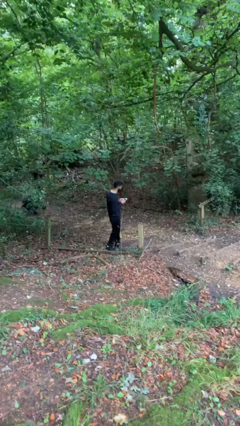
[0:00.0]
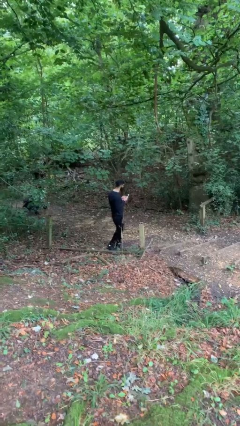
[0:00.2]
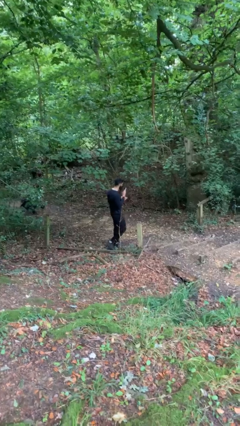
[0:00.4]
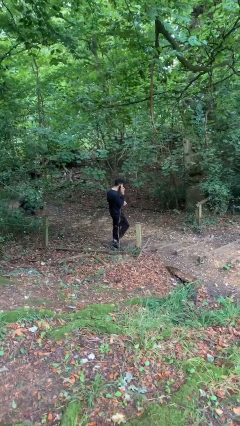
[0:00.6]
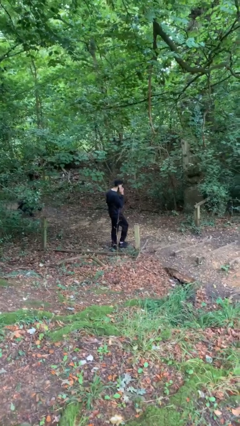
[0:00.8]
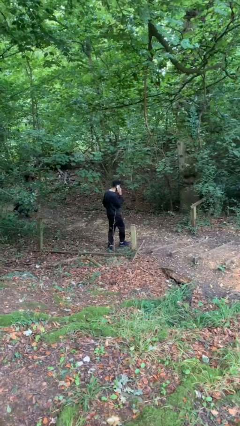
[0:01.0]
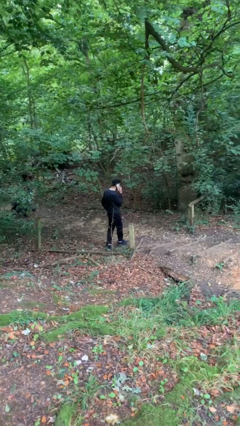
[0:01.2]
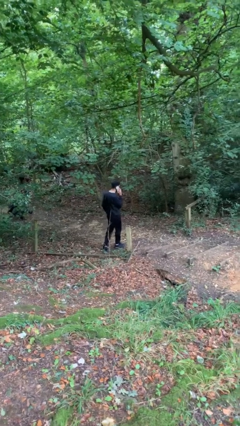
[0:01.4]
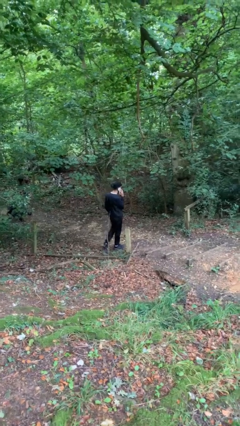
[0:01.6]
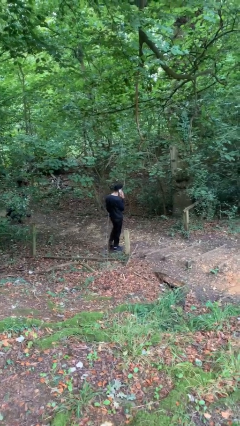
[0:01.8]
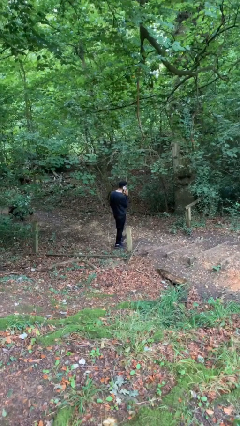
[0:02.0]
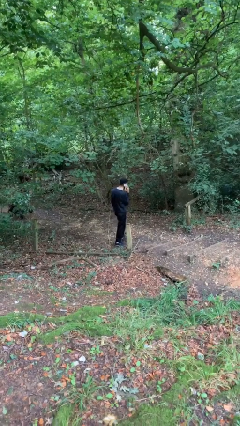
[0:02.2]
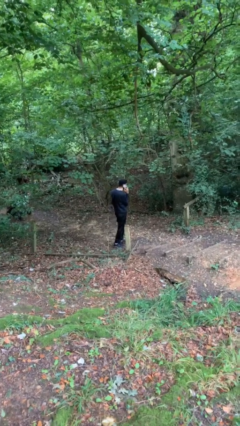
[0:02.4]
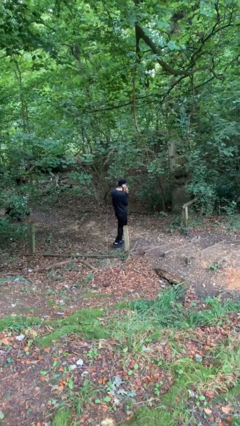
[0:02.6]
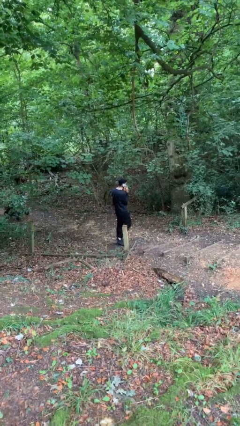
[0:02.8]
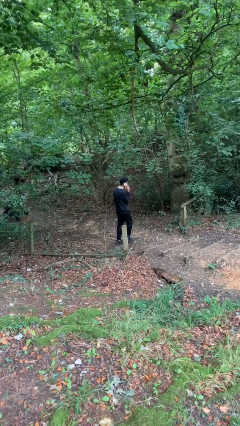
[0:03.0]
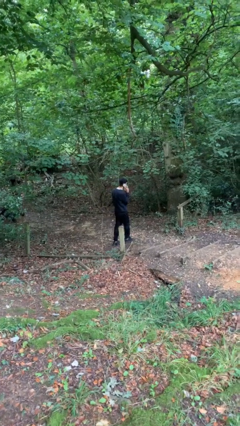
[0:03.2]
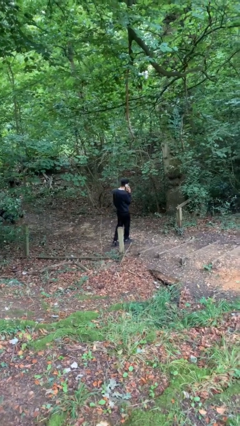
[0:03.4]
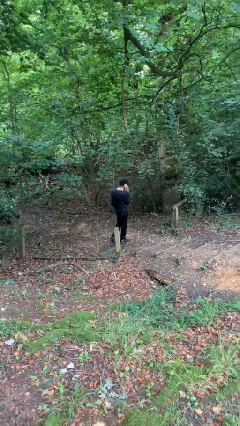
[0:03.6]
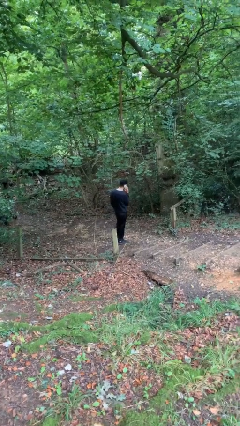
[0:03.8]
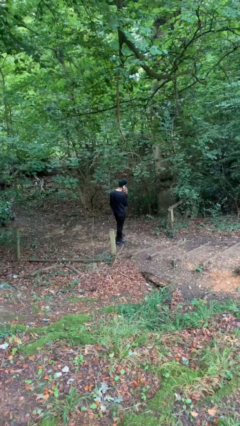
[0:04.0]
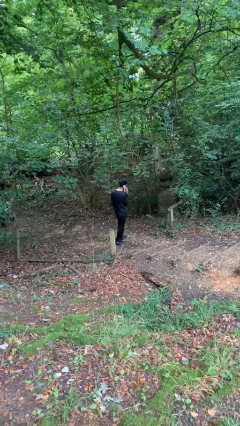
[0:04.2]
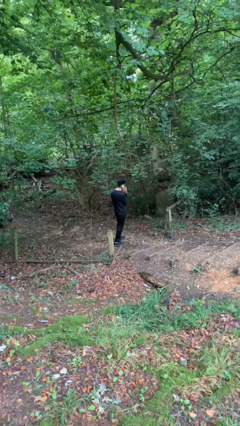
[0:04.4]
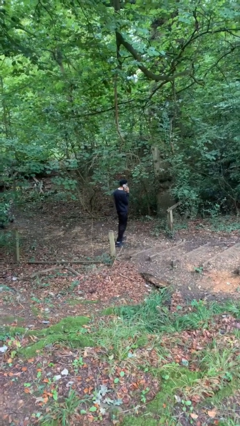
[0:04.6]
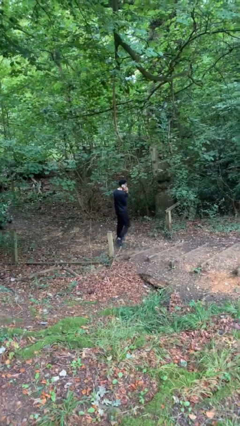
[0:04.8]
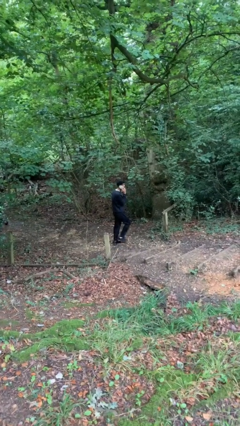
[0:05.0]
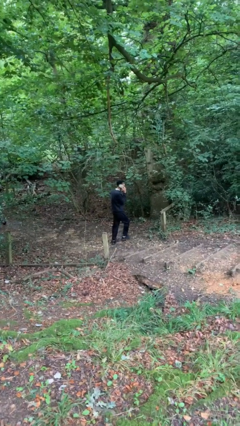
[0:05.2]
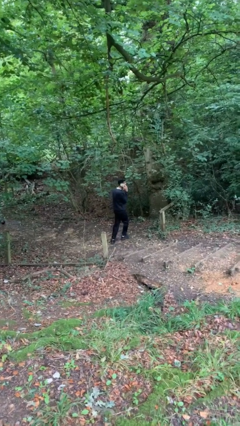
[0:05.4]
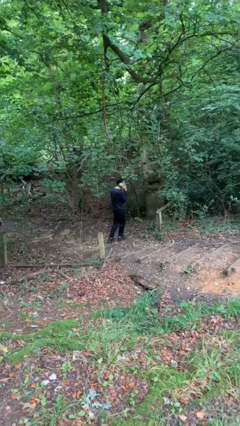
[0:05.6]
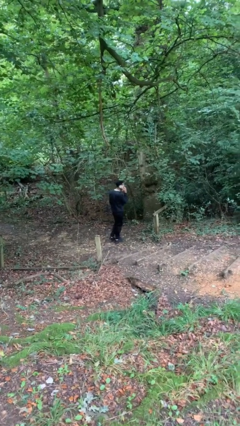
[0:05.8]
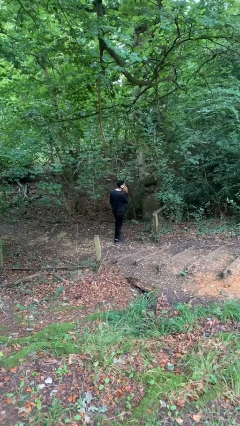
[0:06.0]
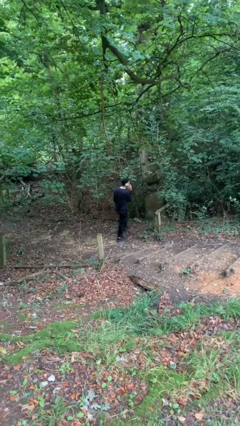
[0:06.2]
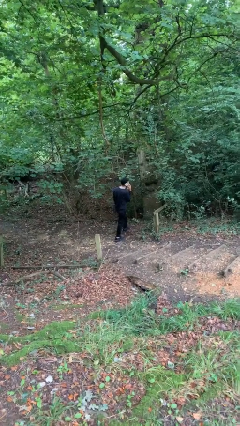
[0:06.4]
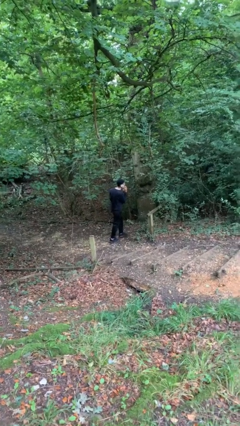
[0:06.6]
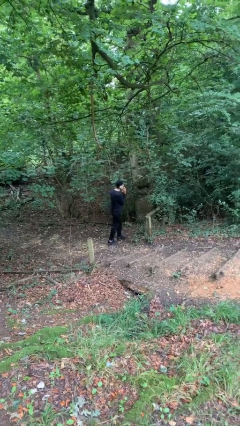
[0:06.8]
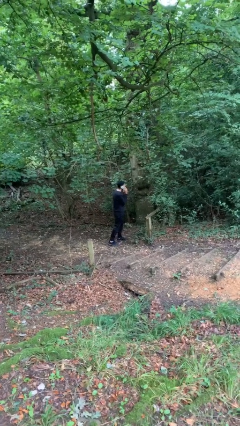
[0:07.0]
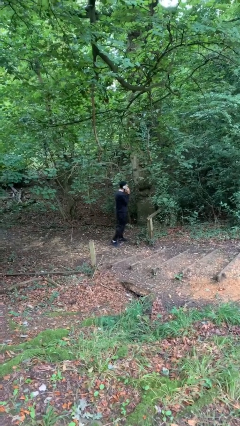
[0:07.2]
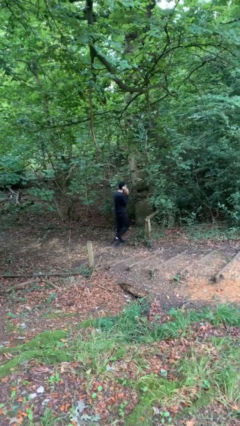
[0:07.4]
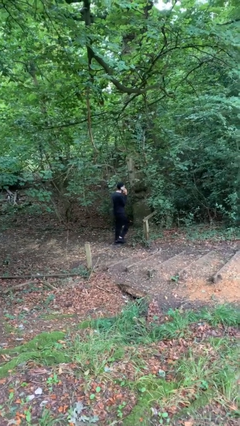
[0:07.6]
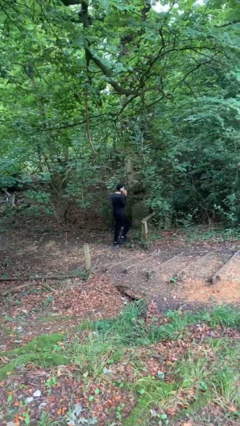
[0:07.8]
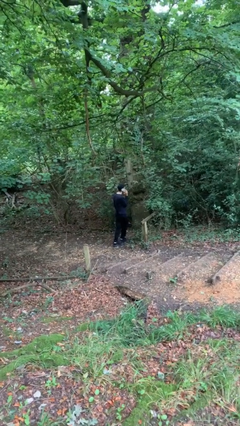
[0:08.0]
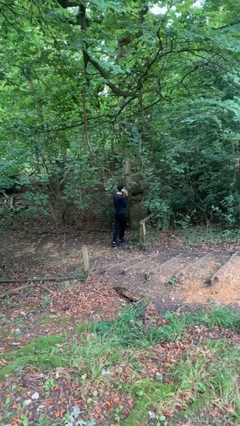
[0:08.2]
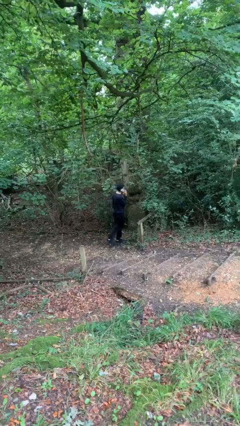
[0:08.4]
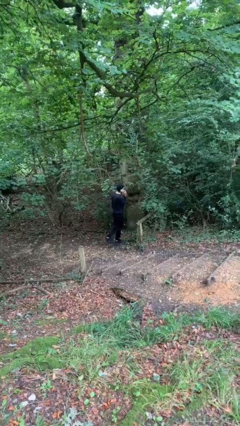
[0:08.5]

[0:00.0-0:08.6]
person talks on phone

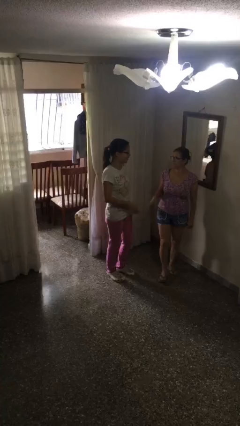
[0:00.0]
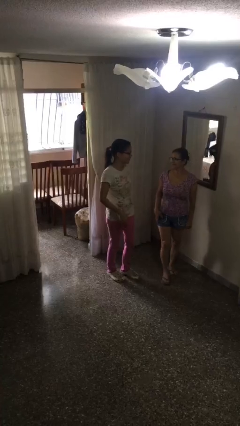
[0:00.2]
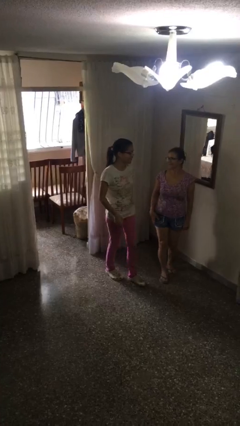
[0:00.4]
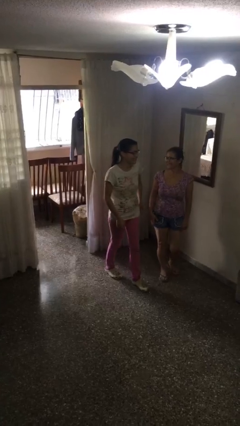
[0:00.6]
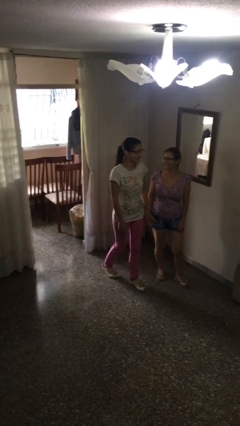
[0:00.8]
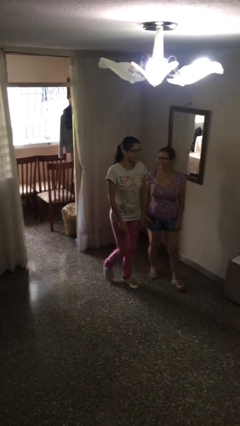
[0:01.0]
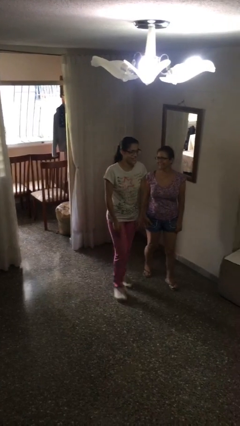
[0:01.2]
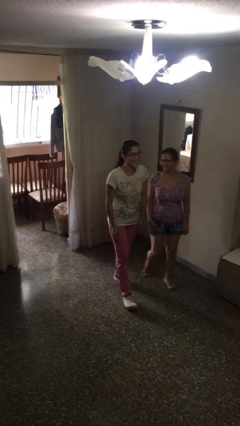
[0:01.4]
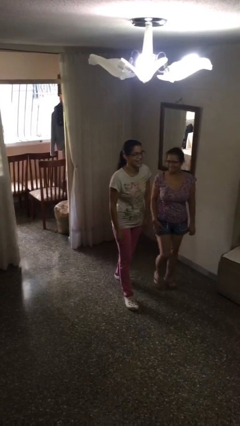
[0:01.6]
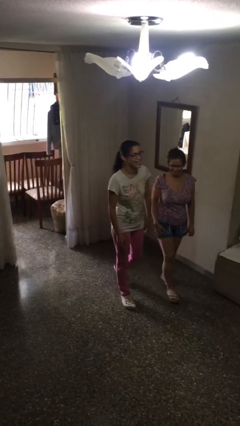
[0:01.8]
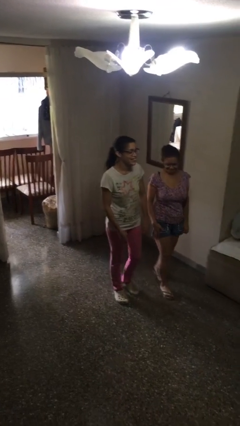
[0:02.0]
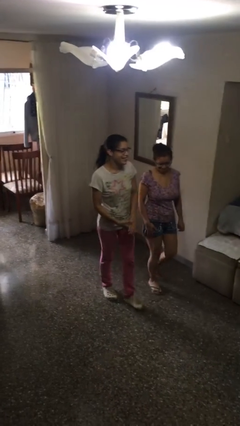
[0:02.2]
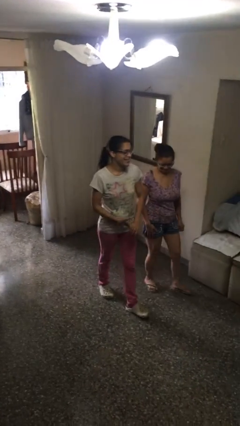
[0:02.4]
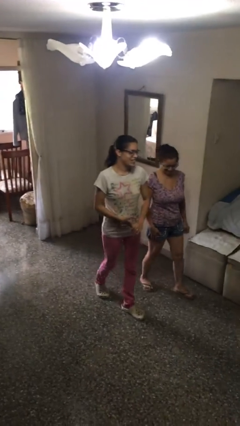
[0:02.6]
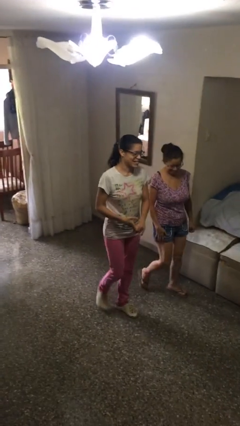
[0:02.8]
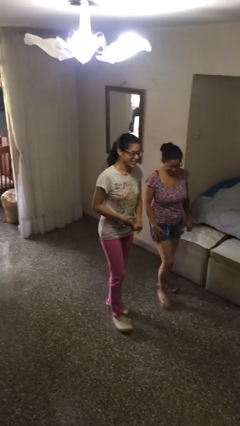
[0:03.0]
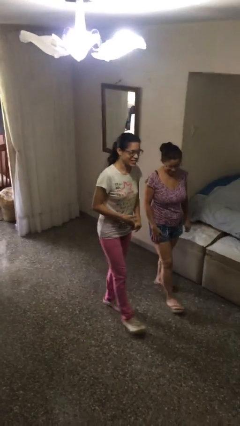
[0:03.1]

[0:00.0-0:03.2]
person talks to person

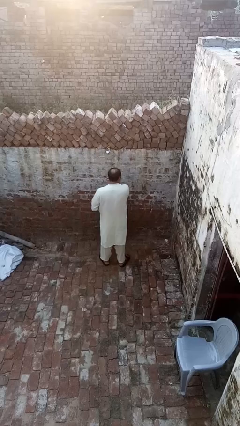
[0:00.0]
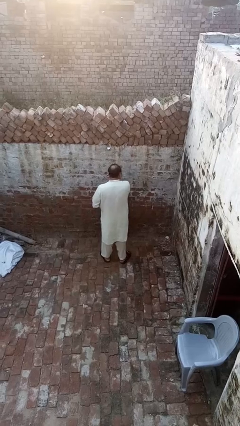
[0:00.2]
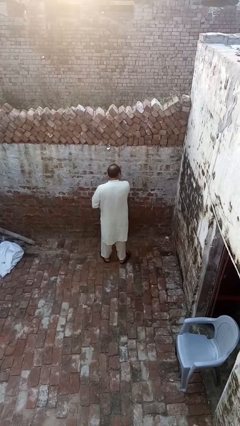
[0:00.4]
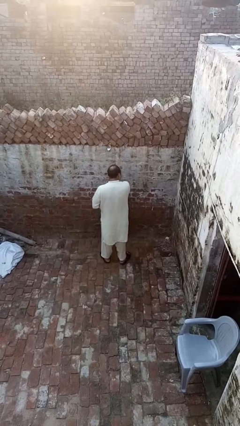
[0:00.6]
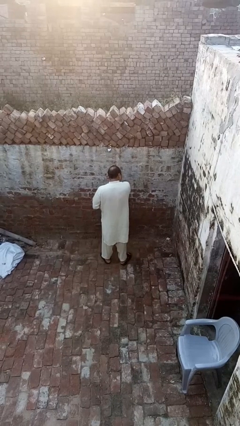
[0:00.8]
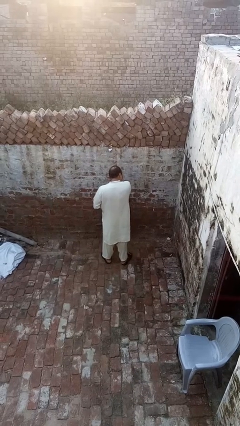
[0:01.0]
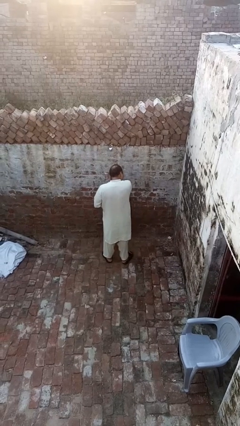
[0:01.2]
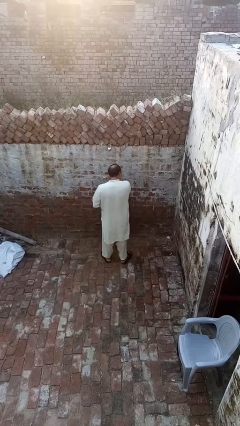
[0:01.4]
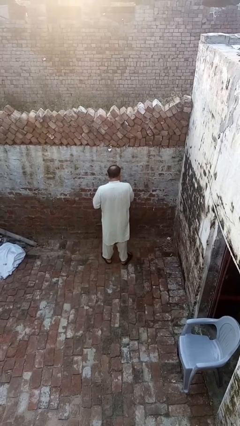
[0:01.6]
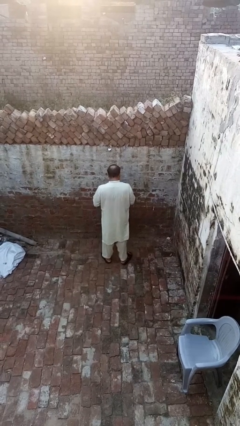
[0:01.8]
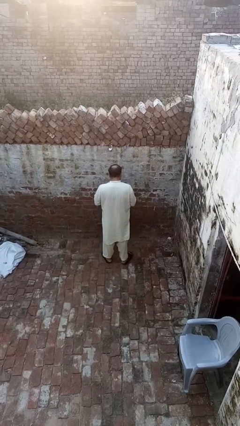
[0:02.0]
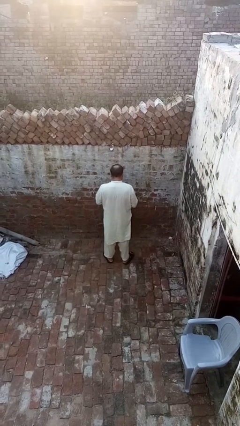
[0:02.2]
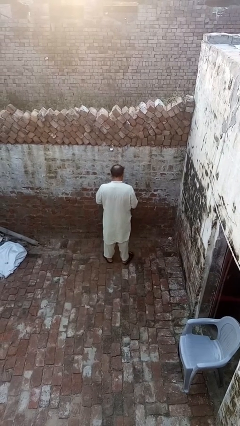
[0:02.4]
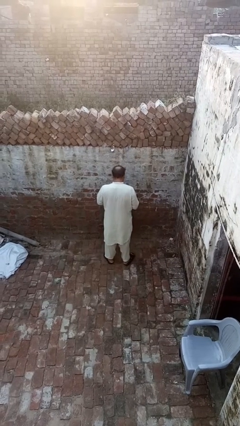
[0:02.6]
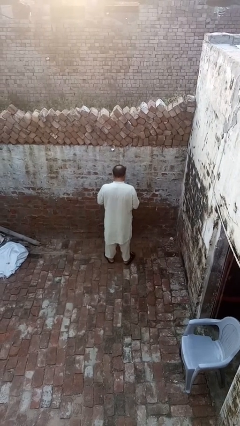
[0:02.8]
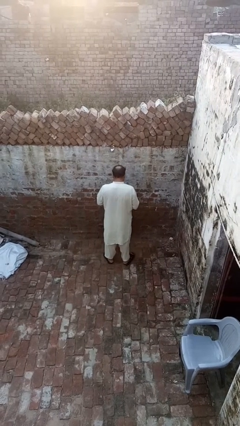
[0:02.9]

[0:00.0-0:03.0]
person takes off earrings

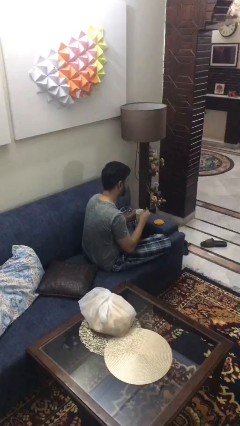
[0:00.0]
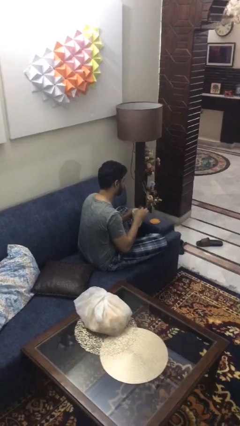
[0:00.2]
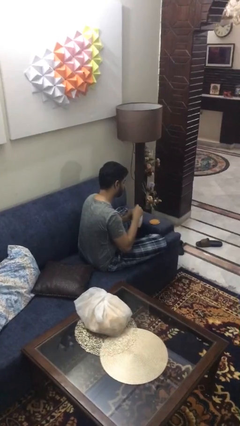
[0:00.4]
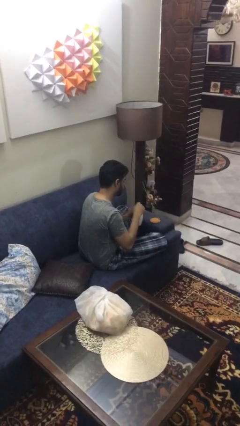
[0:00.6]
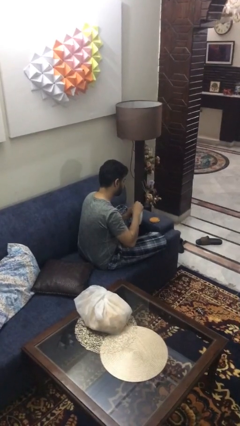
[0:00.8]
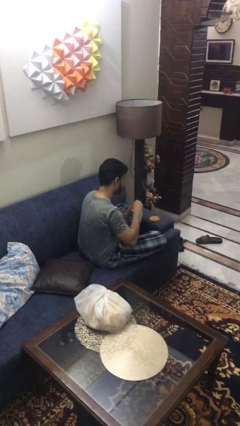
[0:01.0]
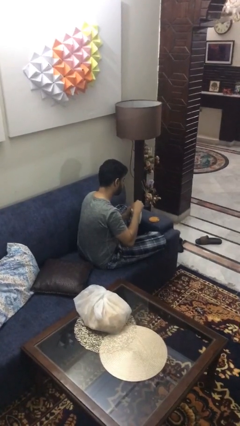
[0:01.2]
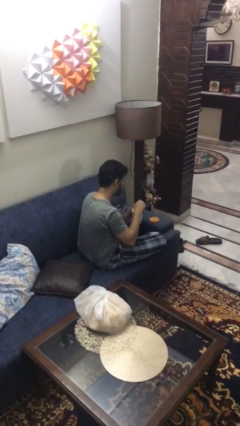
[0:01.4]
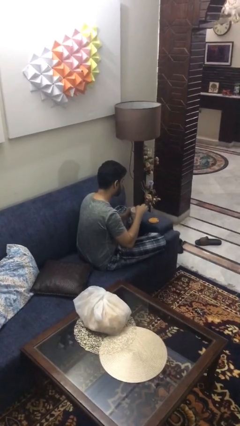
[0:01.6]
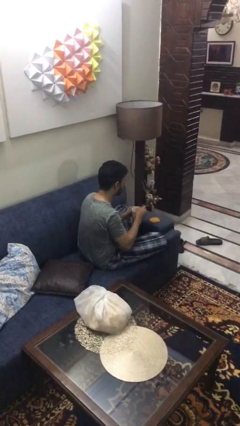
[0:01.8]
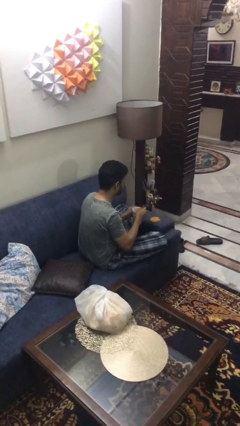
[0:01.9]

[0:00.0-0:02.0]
person stirs mug

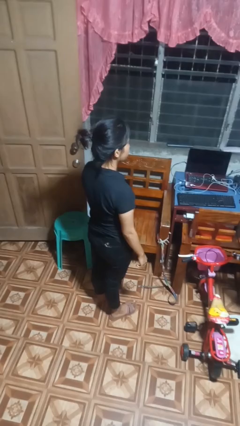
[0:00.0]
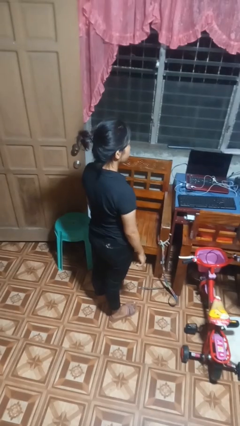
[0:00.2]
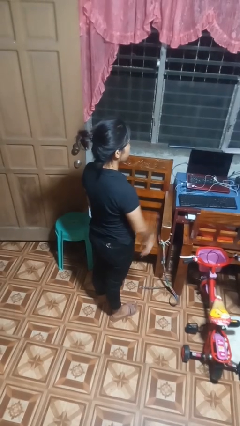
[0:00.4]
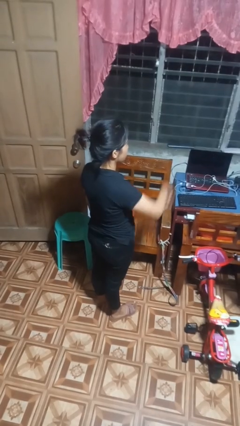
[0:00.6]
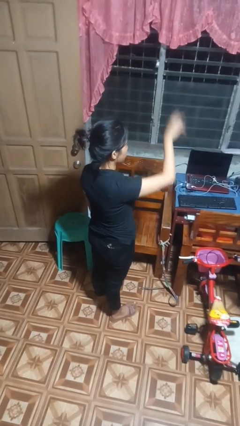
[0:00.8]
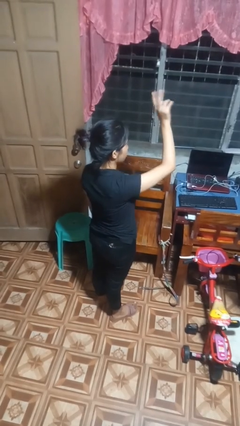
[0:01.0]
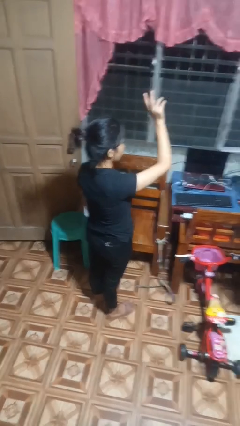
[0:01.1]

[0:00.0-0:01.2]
person gestures swipe up
